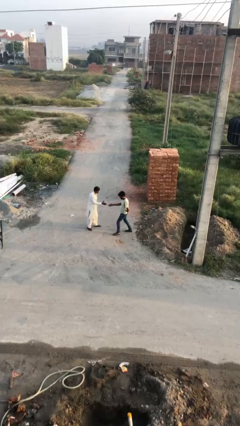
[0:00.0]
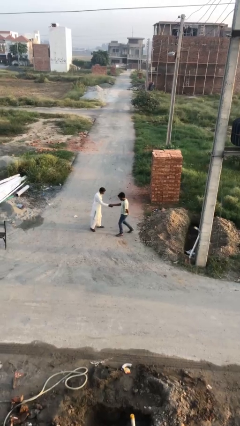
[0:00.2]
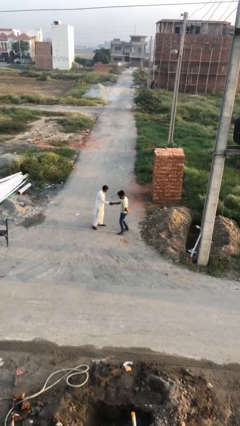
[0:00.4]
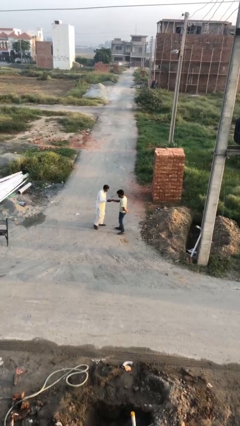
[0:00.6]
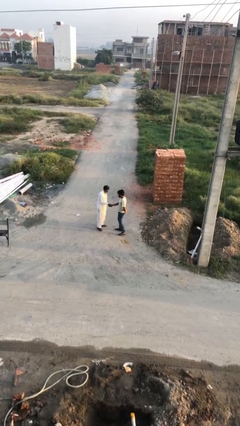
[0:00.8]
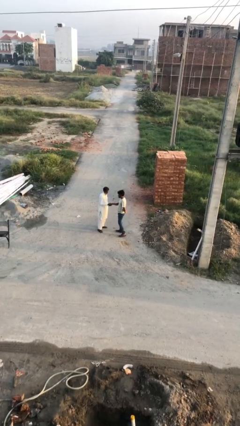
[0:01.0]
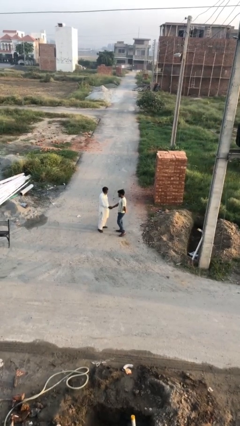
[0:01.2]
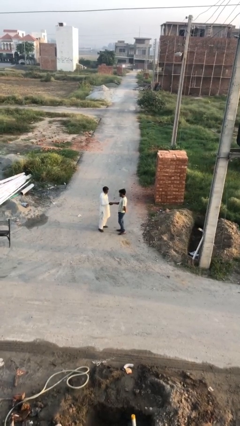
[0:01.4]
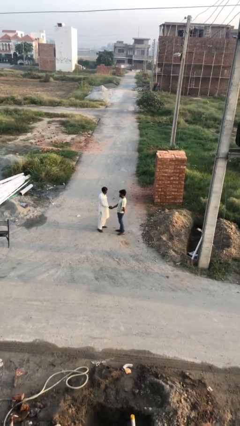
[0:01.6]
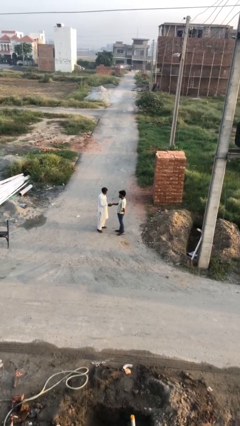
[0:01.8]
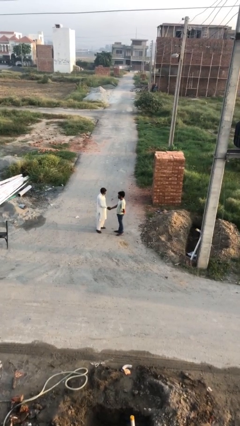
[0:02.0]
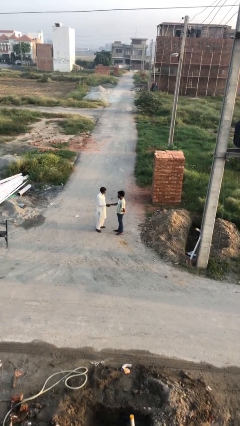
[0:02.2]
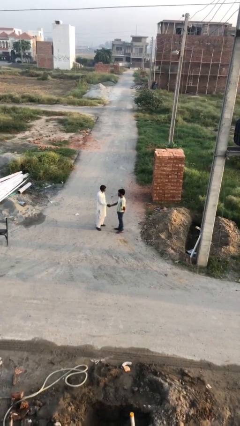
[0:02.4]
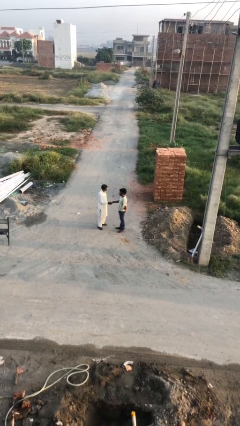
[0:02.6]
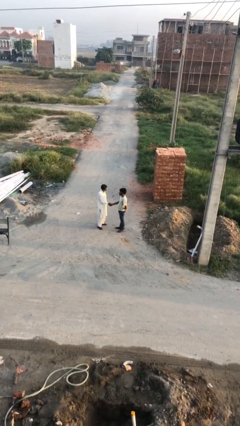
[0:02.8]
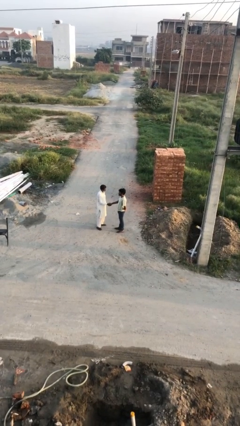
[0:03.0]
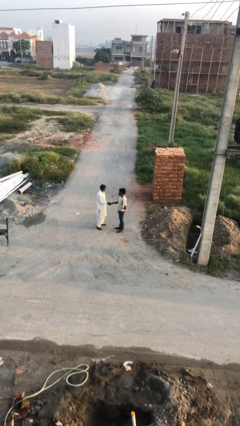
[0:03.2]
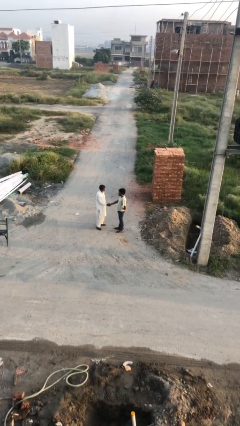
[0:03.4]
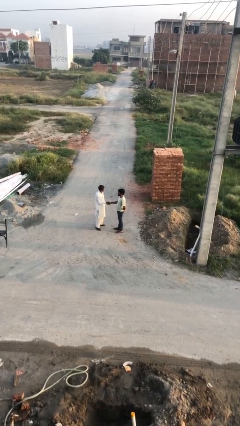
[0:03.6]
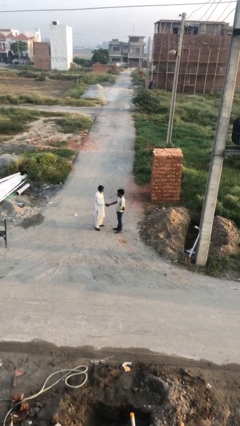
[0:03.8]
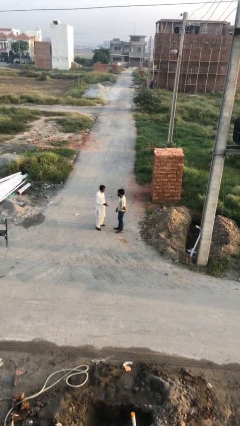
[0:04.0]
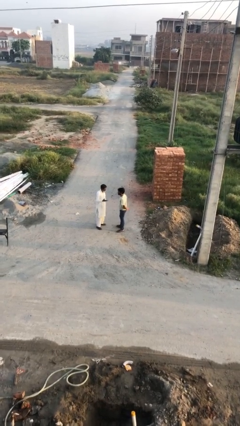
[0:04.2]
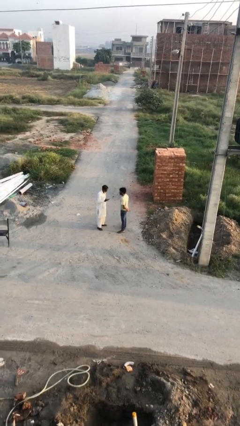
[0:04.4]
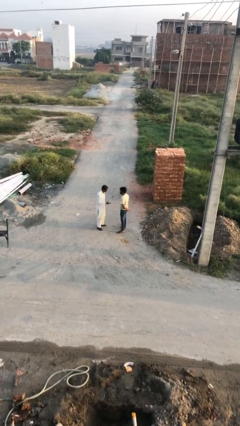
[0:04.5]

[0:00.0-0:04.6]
person shakes hand

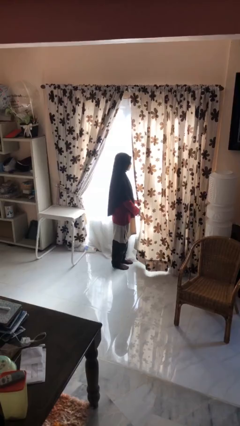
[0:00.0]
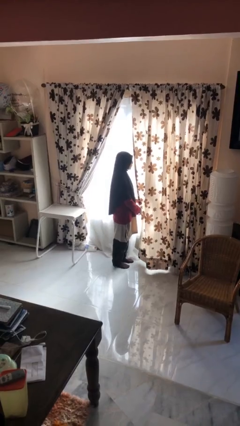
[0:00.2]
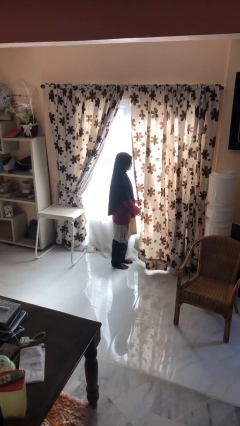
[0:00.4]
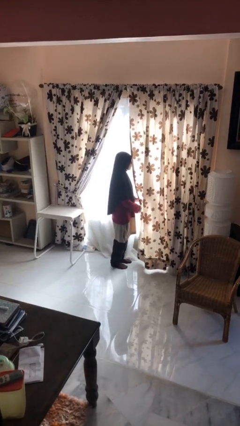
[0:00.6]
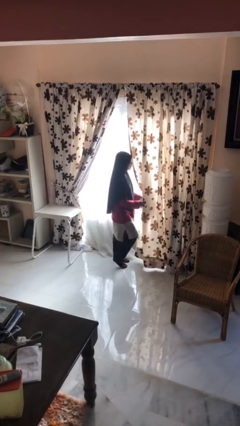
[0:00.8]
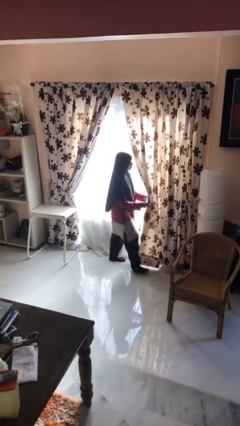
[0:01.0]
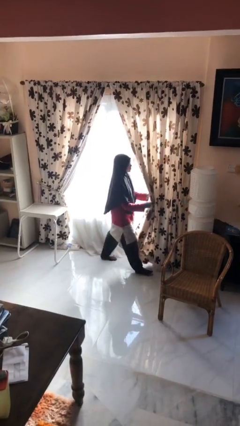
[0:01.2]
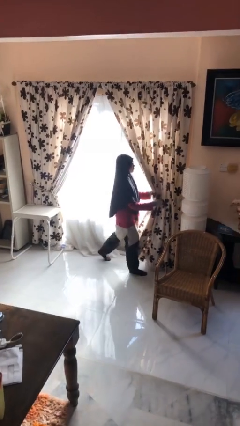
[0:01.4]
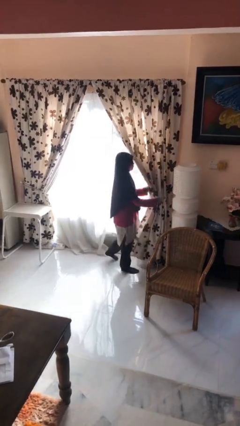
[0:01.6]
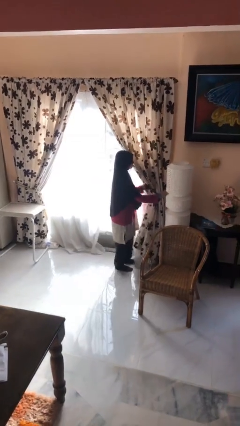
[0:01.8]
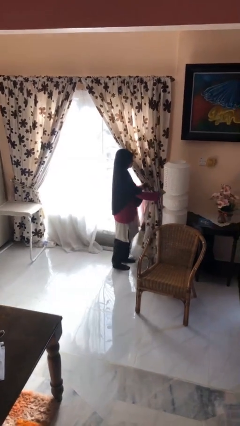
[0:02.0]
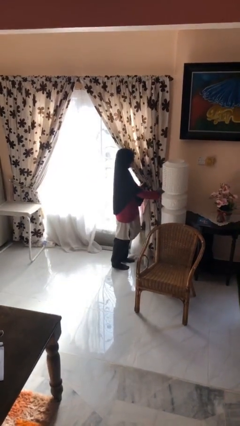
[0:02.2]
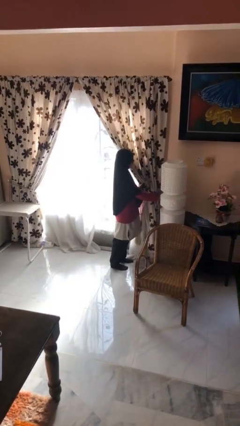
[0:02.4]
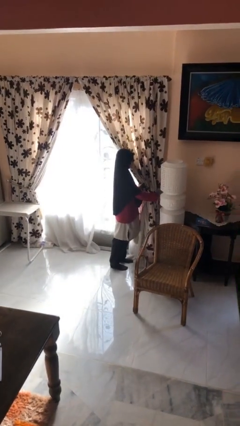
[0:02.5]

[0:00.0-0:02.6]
person opens curtains

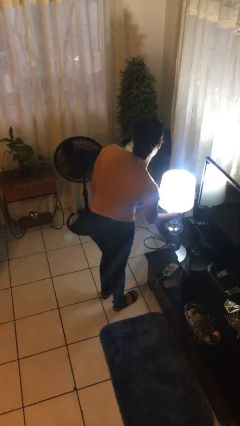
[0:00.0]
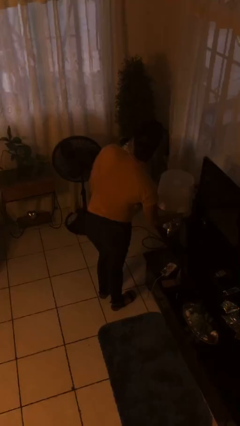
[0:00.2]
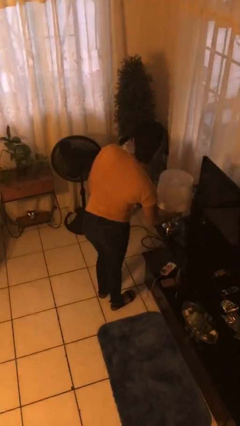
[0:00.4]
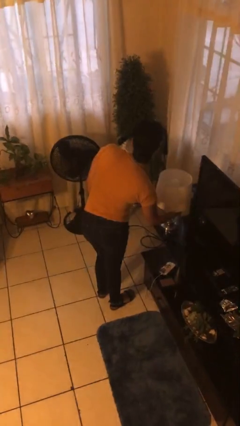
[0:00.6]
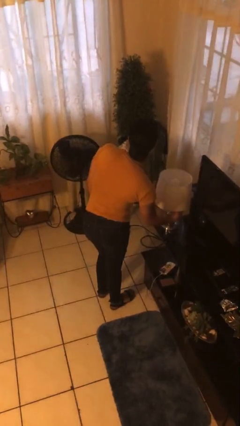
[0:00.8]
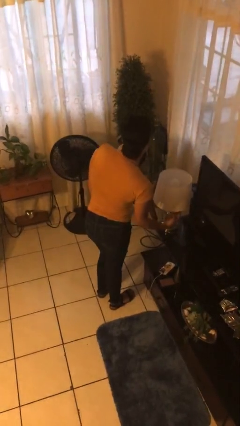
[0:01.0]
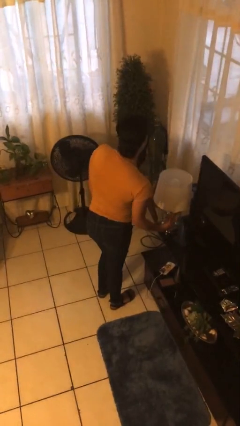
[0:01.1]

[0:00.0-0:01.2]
person turns off lamp

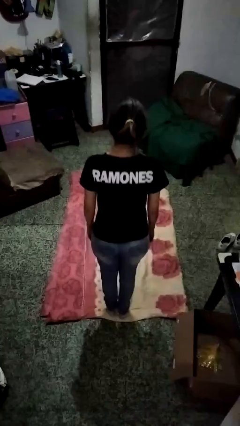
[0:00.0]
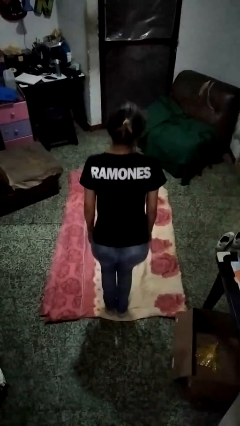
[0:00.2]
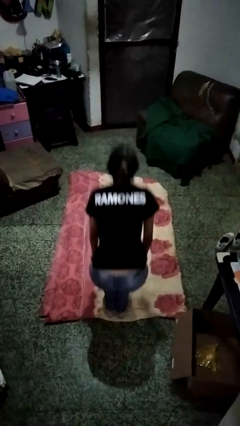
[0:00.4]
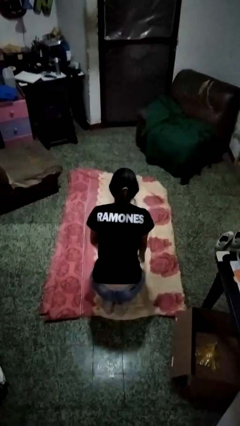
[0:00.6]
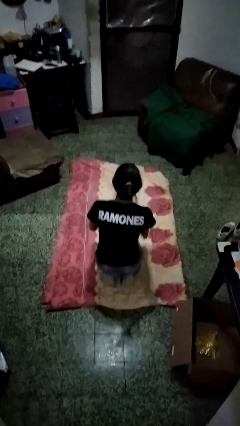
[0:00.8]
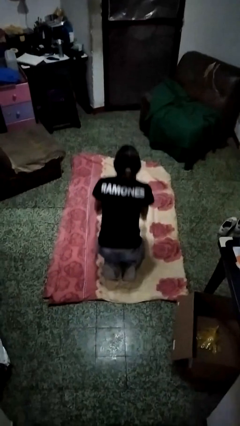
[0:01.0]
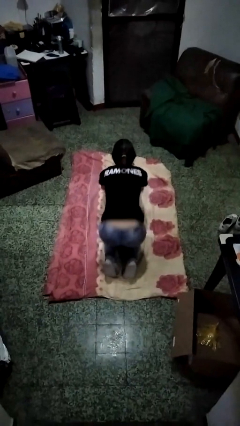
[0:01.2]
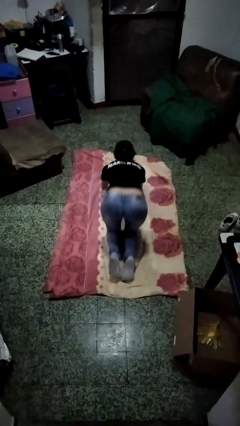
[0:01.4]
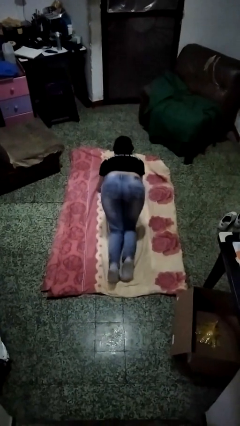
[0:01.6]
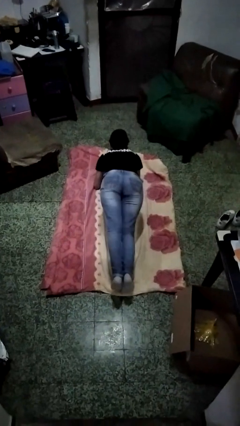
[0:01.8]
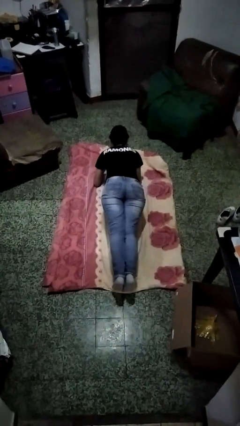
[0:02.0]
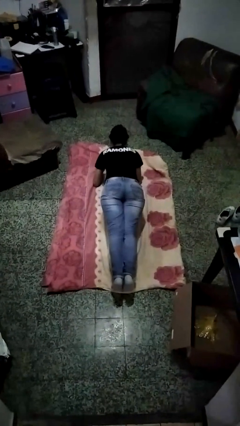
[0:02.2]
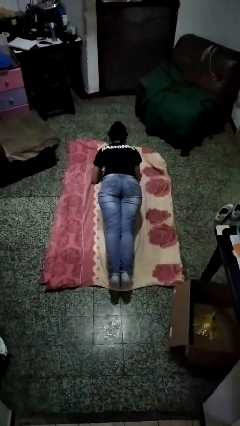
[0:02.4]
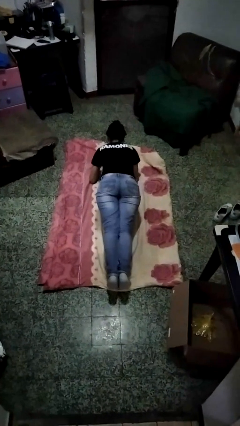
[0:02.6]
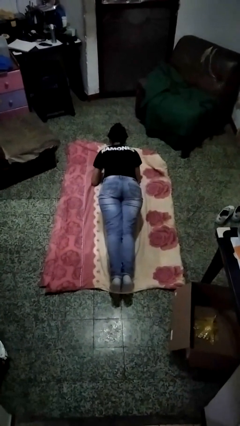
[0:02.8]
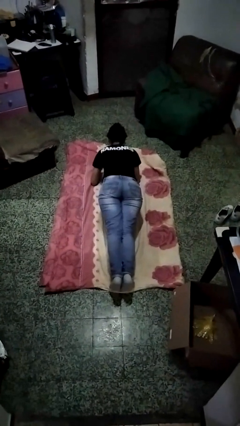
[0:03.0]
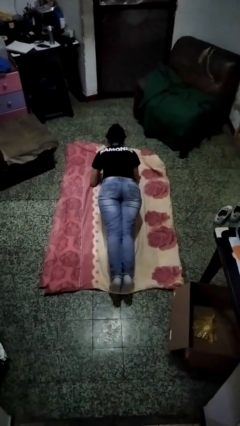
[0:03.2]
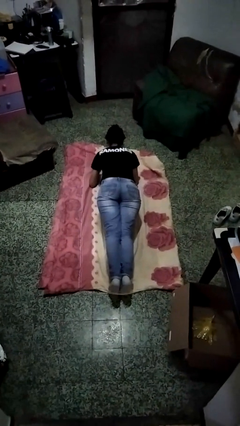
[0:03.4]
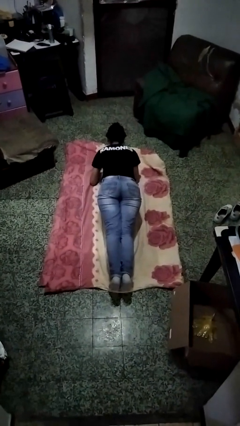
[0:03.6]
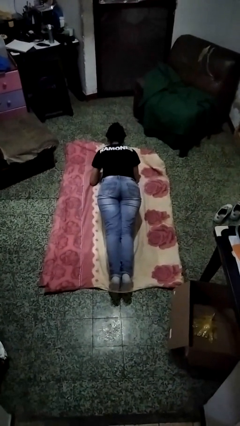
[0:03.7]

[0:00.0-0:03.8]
person exercises with plank

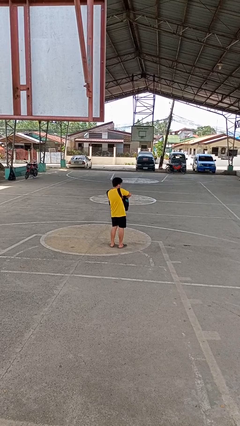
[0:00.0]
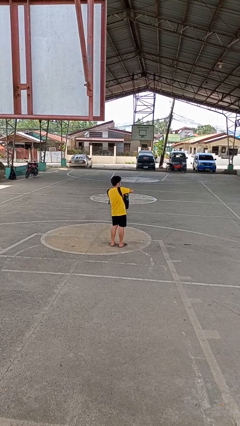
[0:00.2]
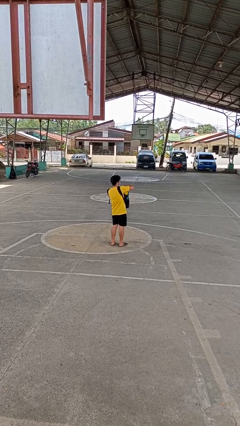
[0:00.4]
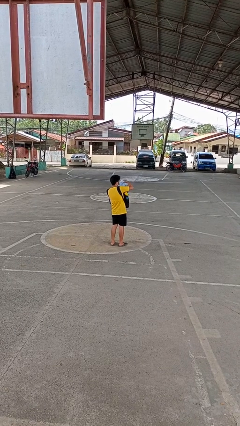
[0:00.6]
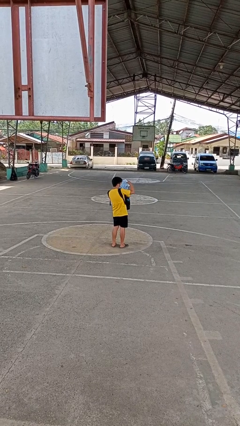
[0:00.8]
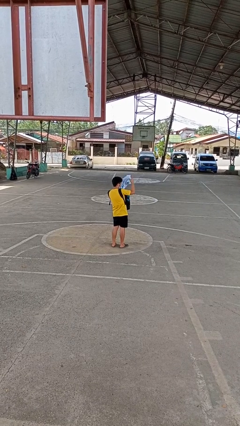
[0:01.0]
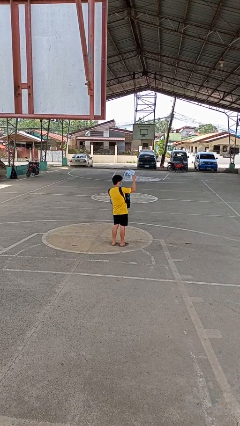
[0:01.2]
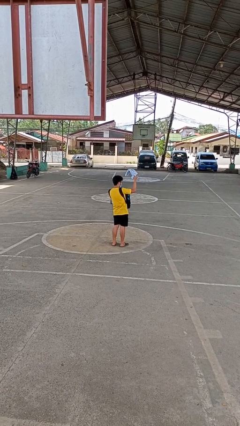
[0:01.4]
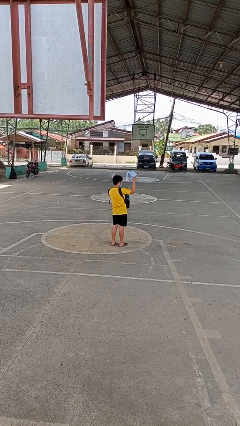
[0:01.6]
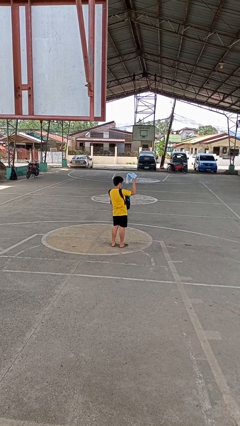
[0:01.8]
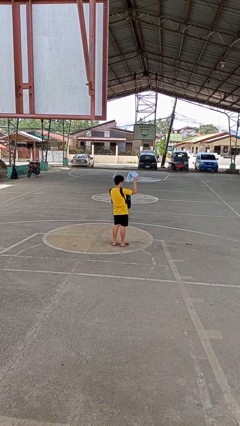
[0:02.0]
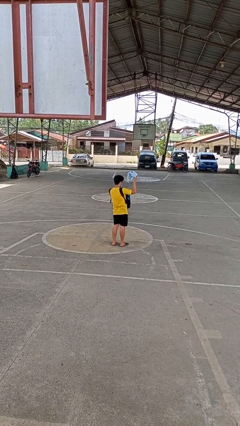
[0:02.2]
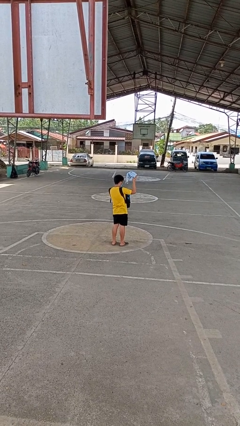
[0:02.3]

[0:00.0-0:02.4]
person takes object from backpack

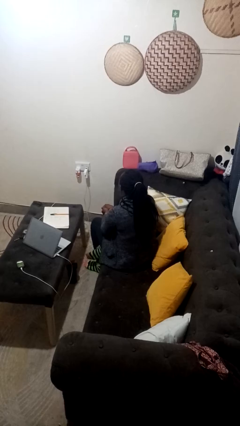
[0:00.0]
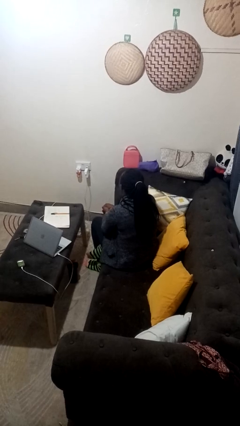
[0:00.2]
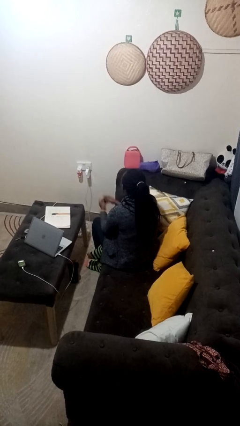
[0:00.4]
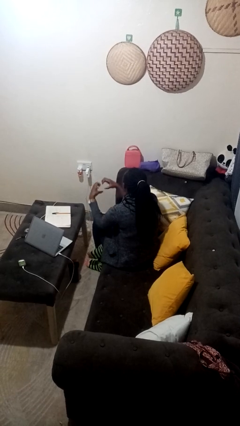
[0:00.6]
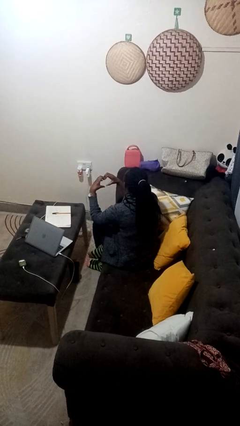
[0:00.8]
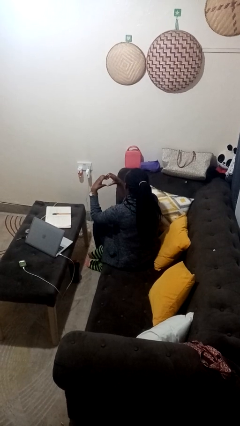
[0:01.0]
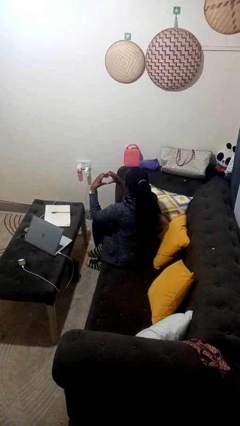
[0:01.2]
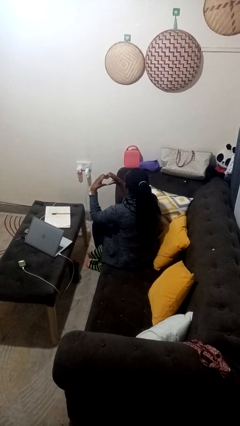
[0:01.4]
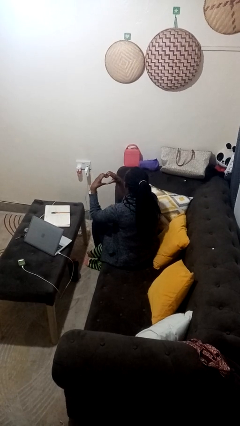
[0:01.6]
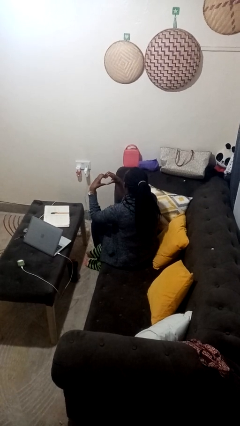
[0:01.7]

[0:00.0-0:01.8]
person gestures heart

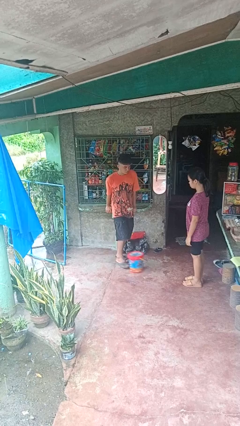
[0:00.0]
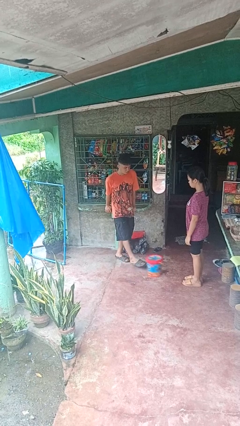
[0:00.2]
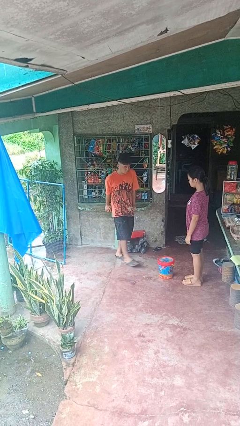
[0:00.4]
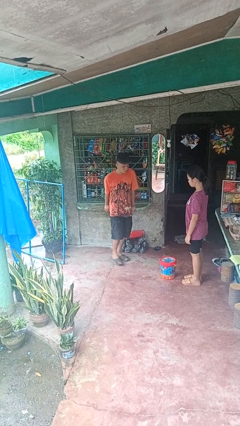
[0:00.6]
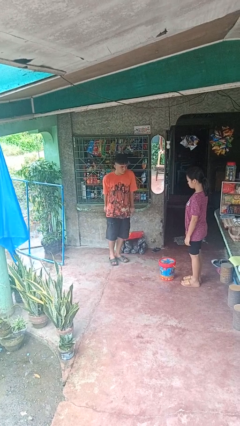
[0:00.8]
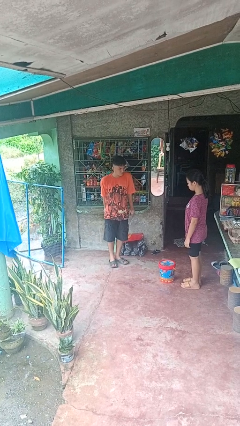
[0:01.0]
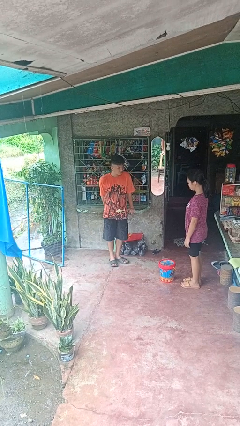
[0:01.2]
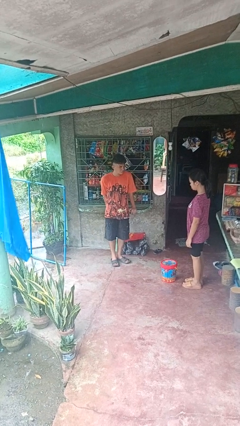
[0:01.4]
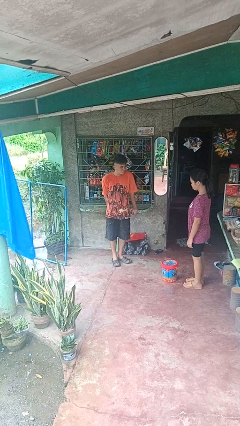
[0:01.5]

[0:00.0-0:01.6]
person kicks object to person
